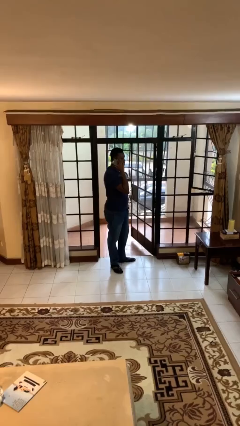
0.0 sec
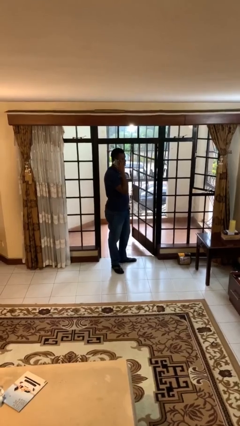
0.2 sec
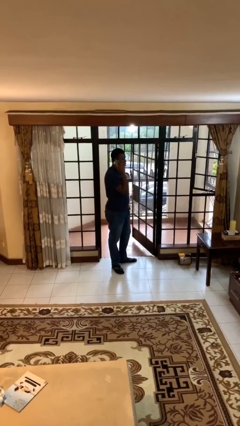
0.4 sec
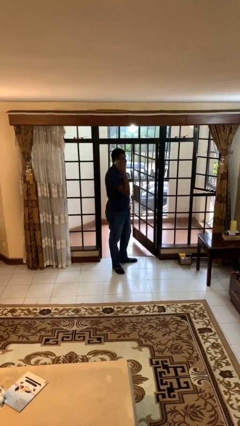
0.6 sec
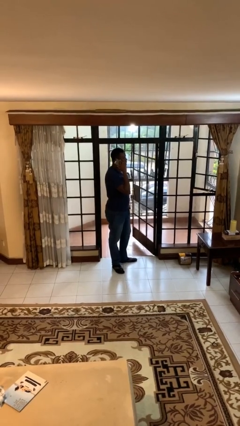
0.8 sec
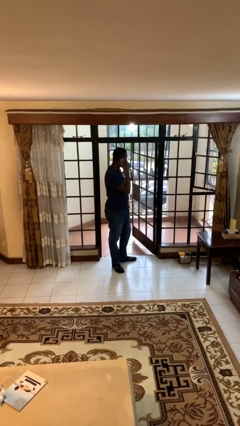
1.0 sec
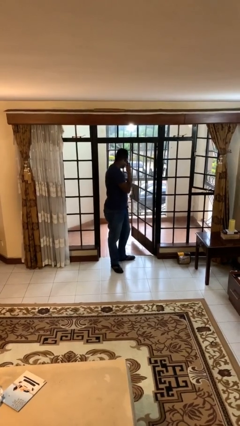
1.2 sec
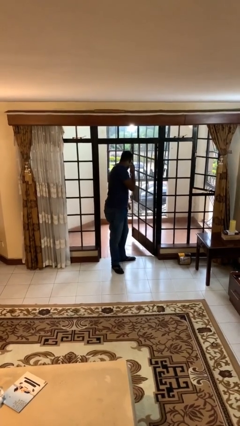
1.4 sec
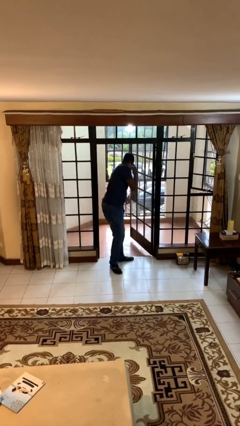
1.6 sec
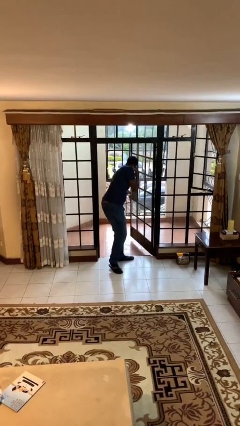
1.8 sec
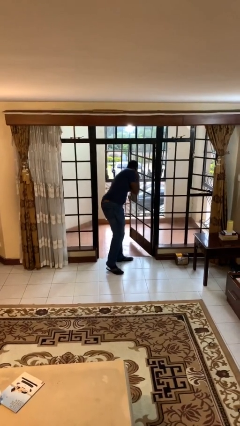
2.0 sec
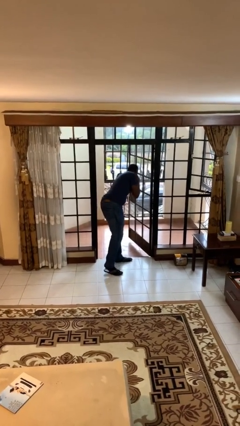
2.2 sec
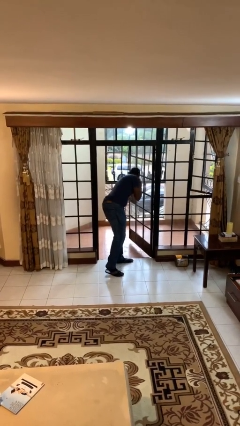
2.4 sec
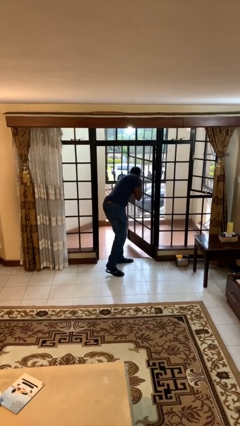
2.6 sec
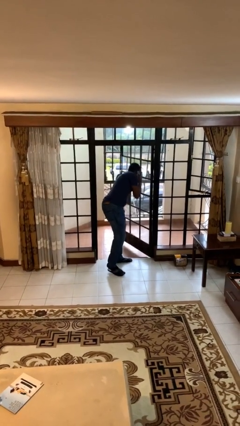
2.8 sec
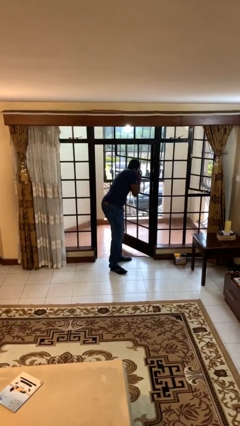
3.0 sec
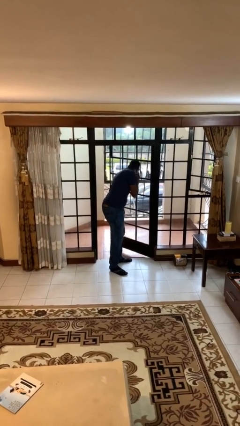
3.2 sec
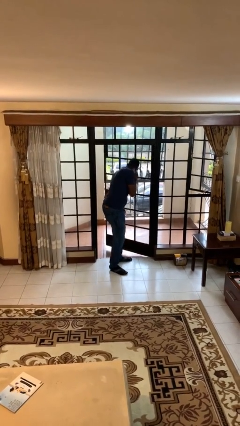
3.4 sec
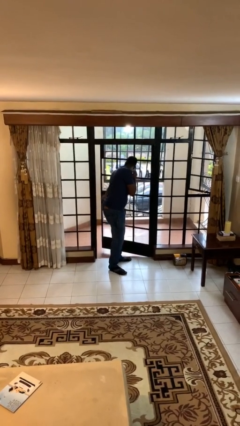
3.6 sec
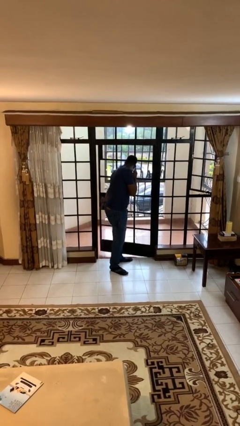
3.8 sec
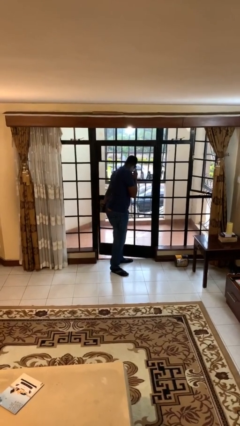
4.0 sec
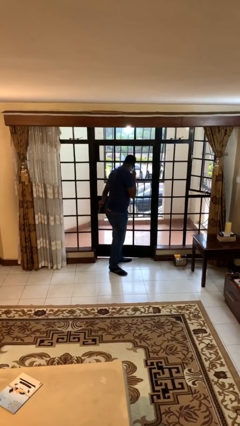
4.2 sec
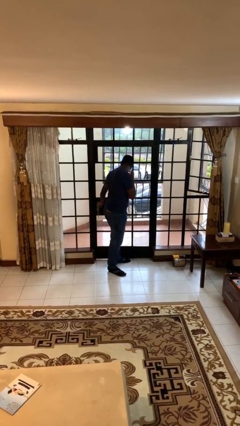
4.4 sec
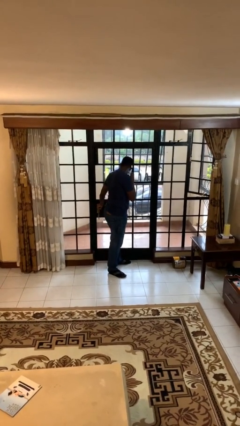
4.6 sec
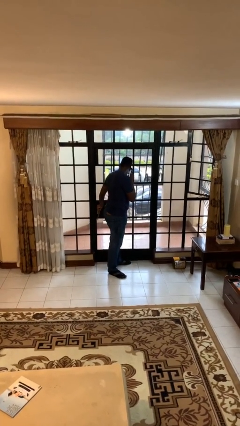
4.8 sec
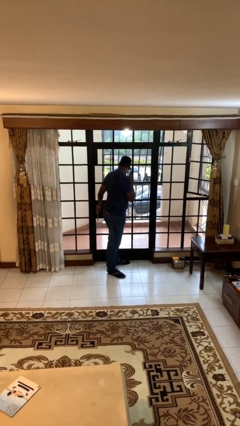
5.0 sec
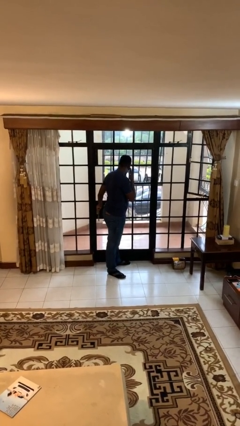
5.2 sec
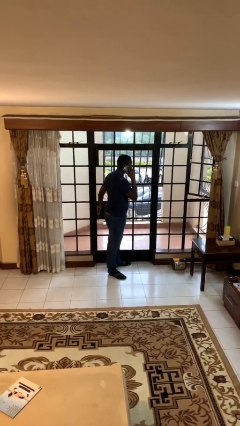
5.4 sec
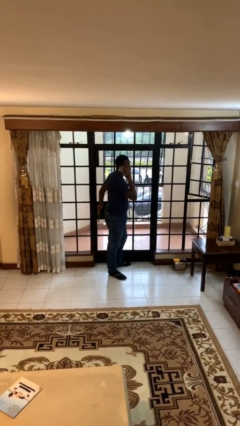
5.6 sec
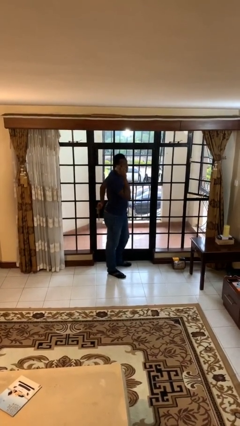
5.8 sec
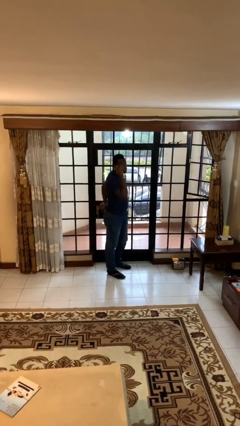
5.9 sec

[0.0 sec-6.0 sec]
person closes facility door

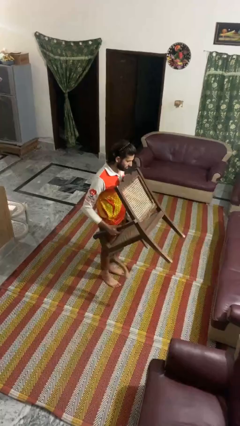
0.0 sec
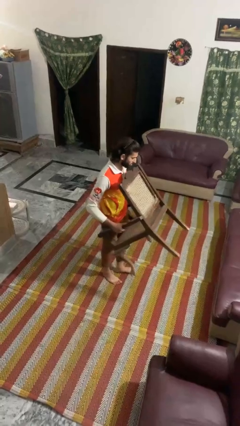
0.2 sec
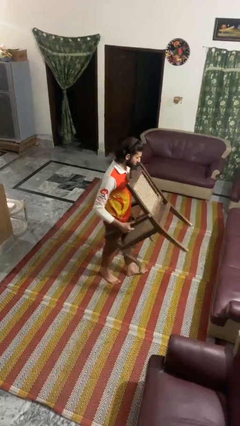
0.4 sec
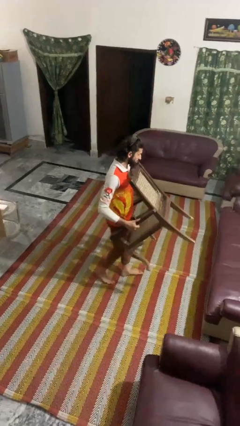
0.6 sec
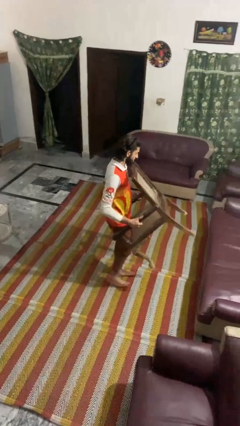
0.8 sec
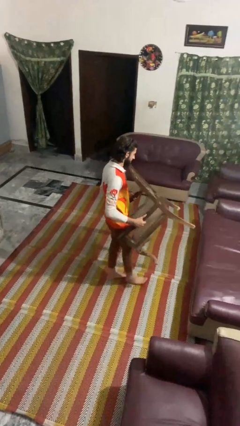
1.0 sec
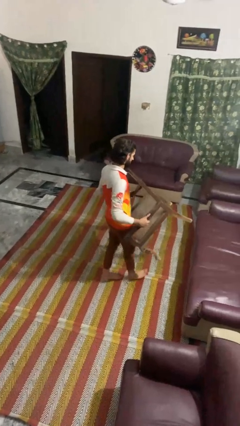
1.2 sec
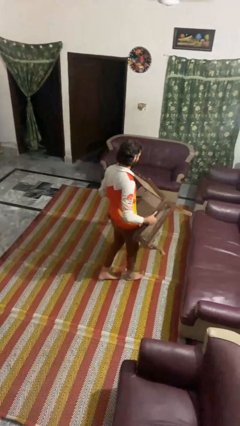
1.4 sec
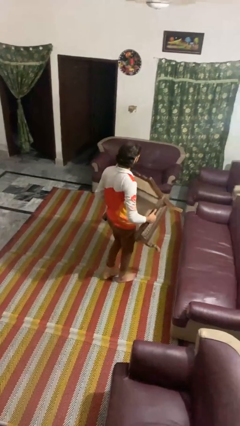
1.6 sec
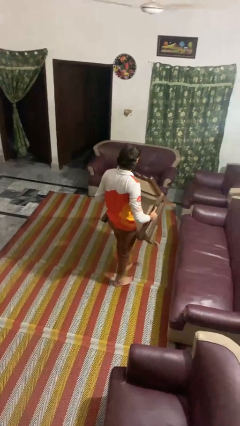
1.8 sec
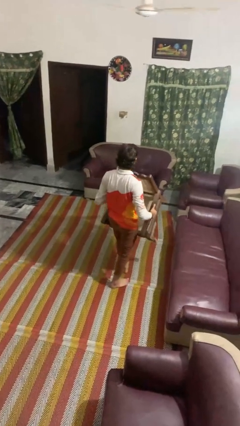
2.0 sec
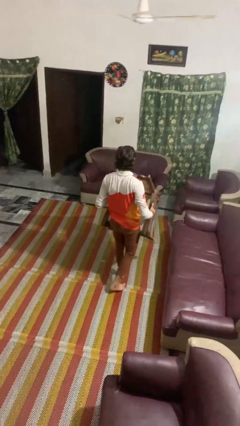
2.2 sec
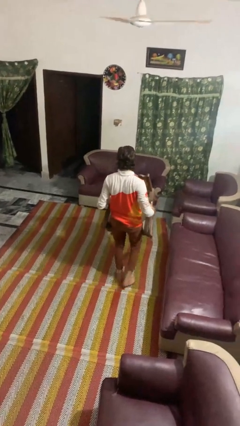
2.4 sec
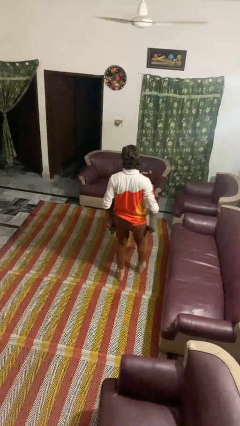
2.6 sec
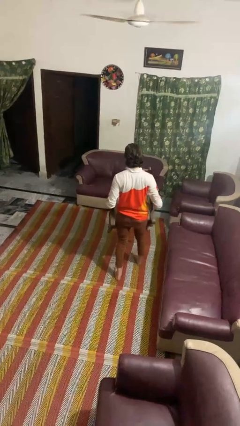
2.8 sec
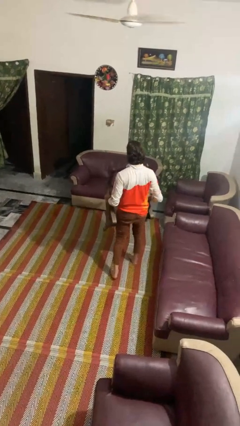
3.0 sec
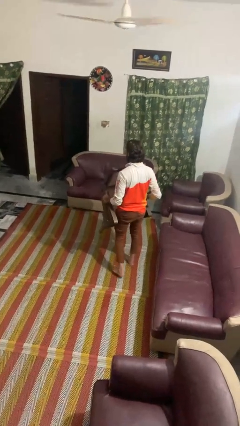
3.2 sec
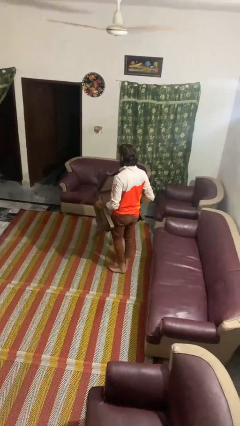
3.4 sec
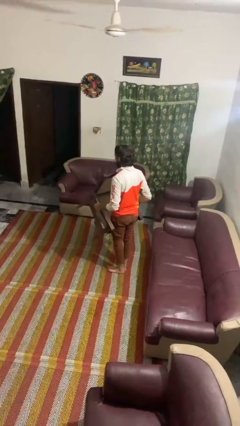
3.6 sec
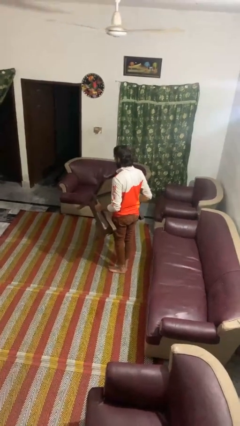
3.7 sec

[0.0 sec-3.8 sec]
person carries furniture

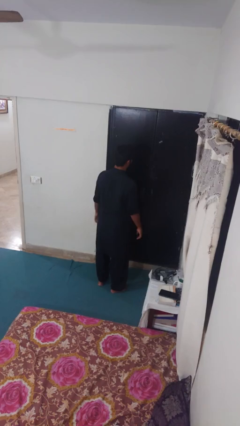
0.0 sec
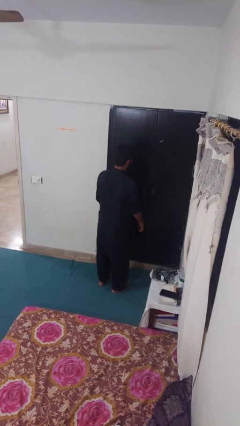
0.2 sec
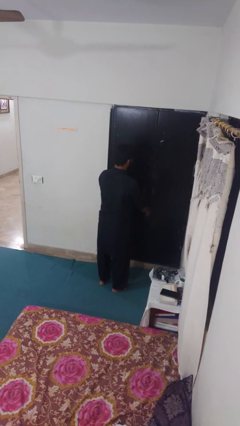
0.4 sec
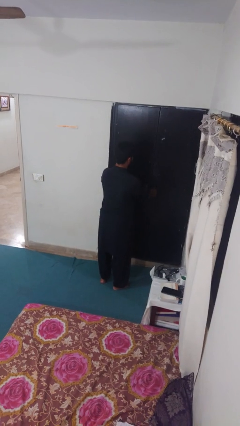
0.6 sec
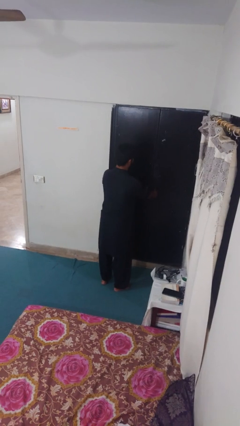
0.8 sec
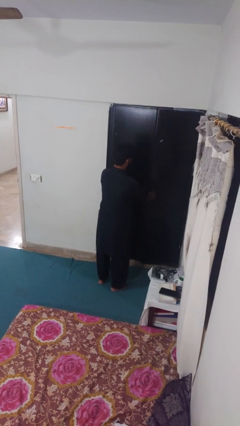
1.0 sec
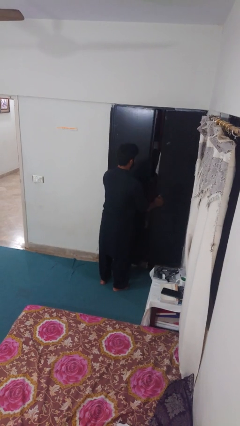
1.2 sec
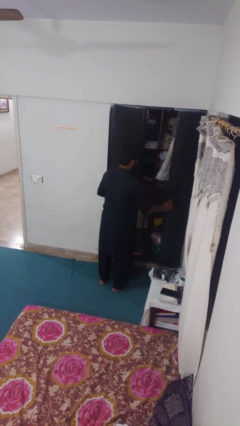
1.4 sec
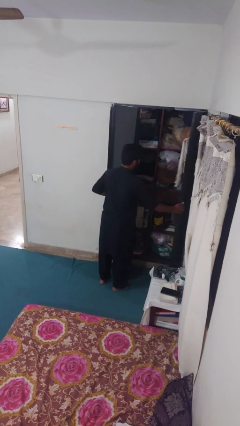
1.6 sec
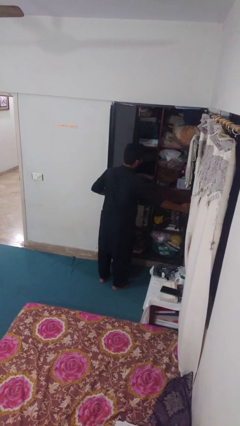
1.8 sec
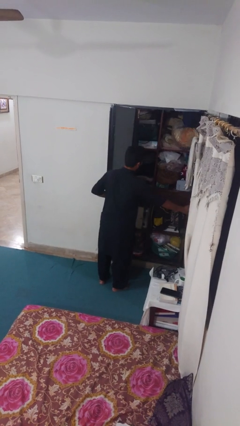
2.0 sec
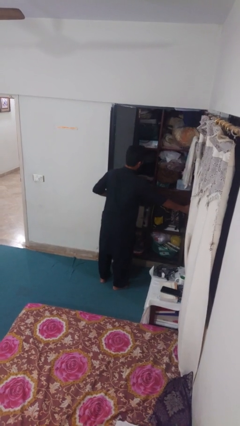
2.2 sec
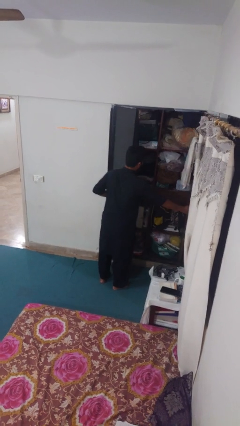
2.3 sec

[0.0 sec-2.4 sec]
person opens closet door

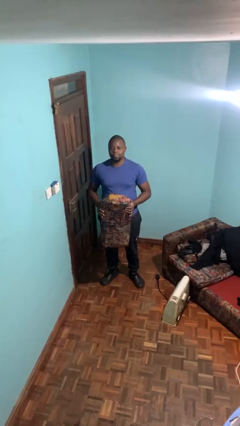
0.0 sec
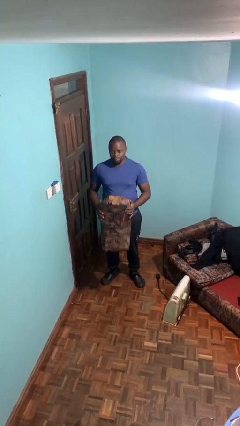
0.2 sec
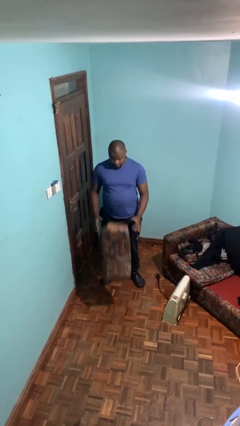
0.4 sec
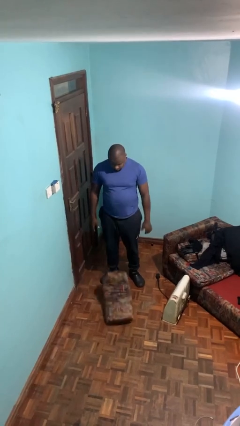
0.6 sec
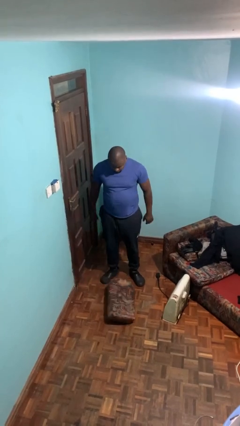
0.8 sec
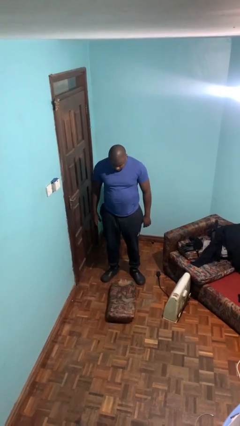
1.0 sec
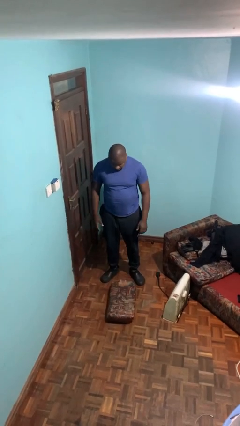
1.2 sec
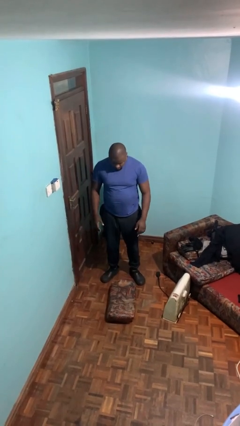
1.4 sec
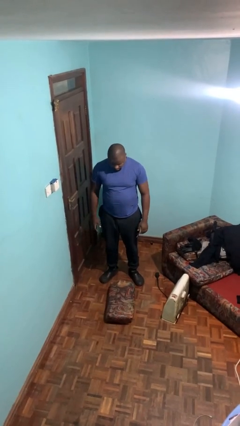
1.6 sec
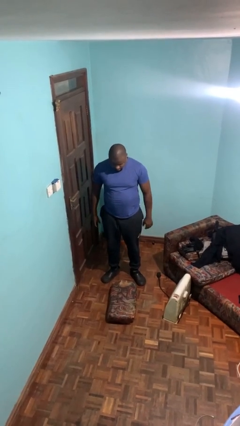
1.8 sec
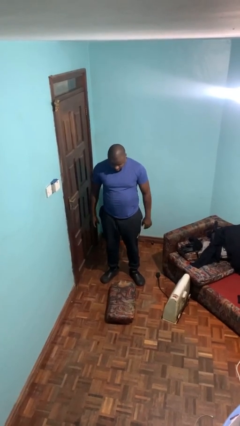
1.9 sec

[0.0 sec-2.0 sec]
person drops object

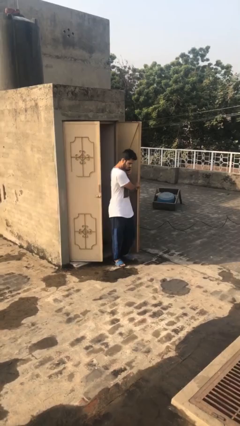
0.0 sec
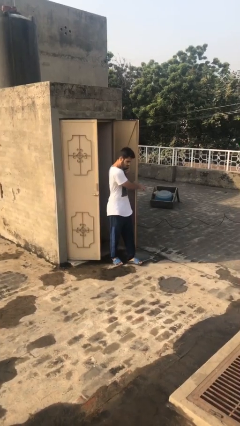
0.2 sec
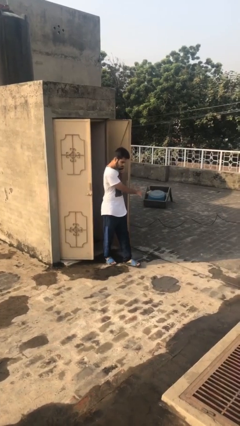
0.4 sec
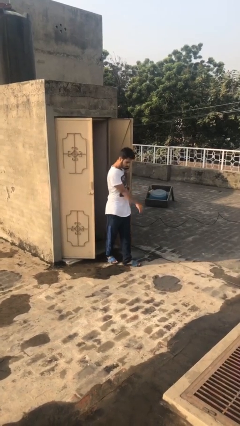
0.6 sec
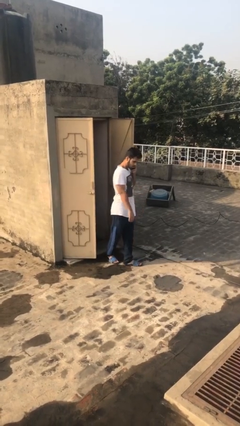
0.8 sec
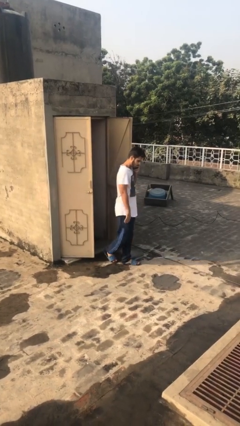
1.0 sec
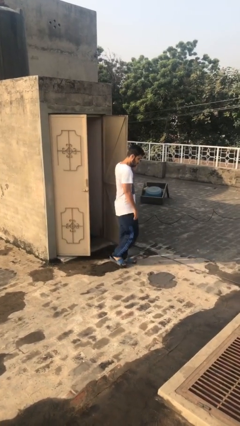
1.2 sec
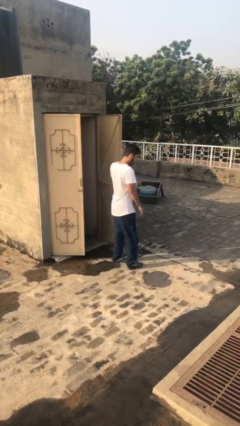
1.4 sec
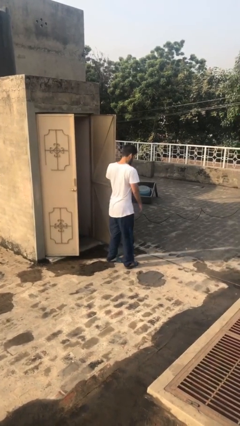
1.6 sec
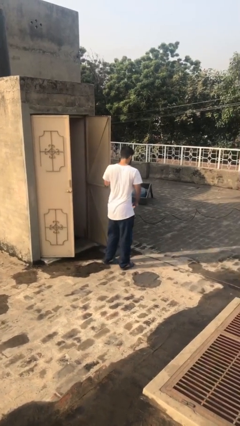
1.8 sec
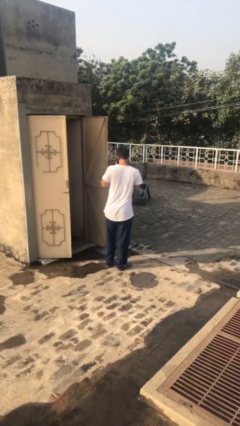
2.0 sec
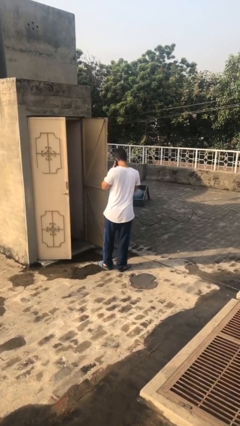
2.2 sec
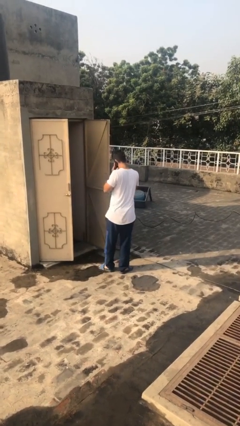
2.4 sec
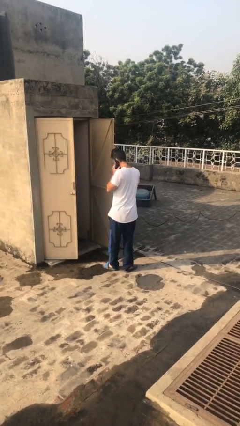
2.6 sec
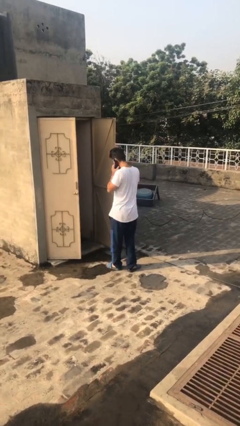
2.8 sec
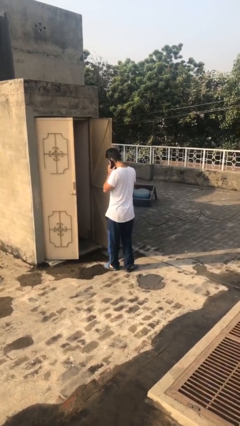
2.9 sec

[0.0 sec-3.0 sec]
person enters scene through structure

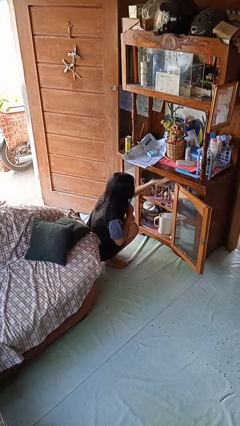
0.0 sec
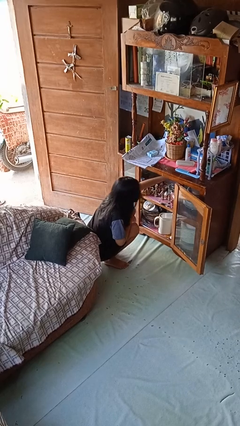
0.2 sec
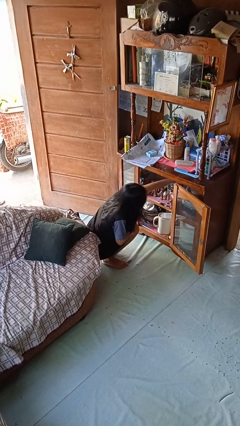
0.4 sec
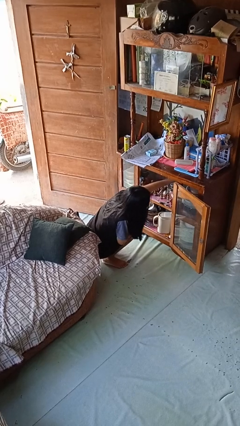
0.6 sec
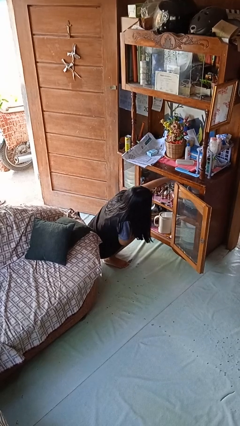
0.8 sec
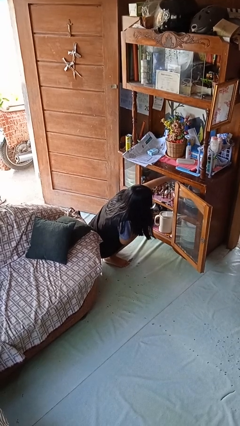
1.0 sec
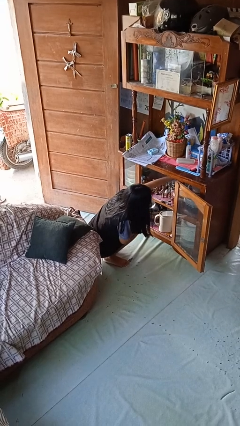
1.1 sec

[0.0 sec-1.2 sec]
person searches in cabinet
